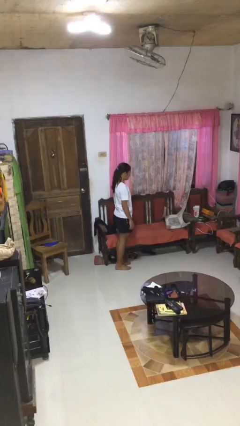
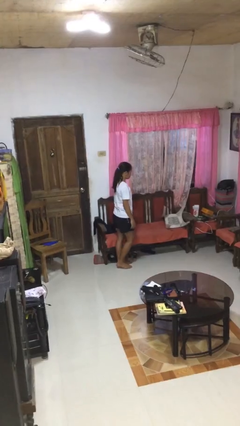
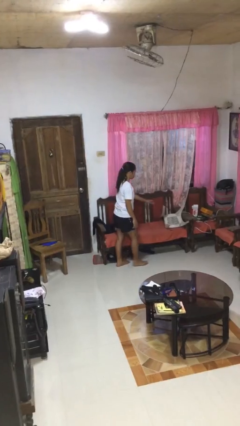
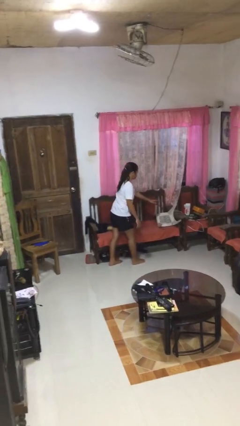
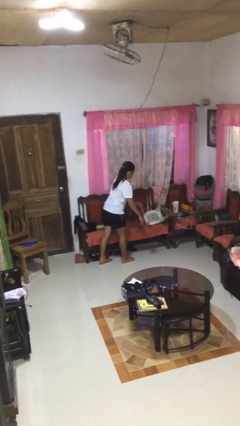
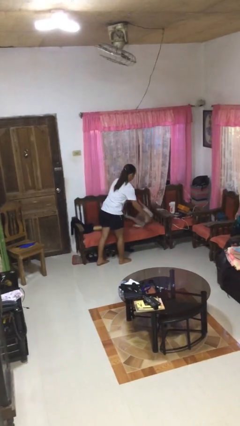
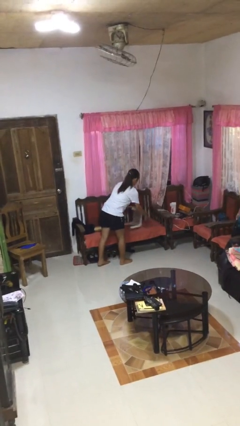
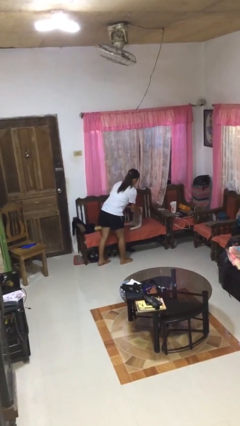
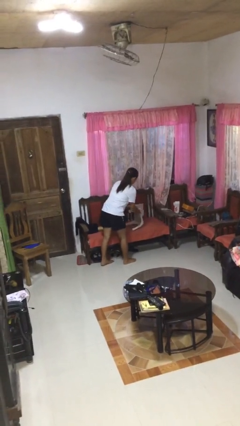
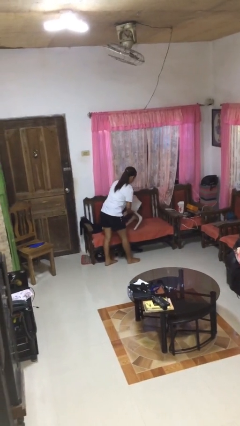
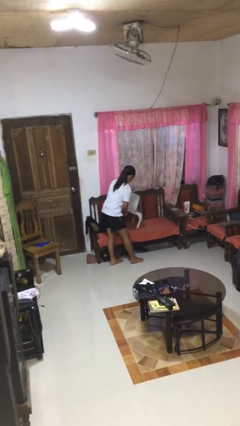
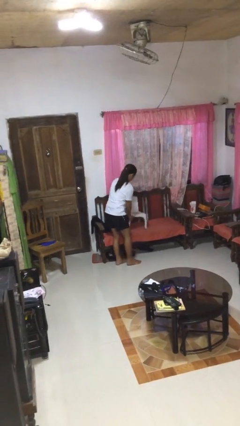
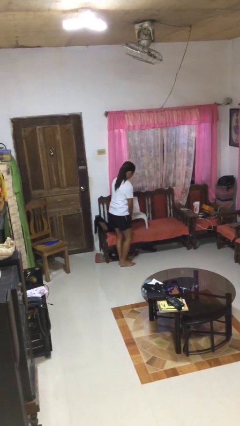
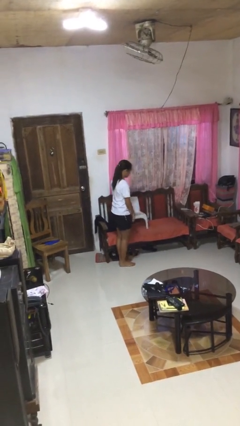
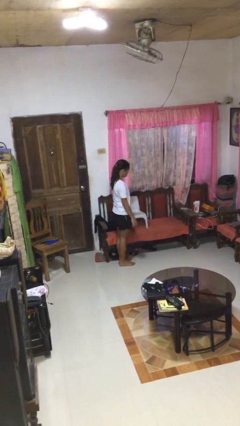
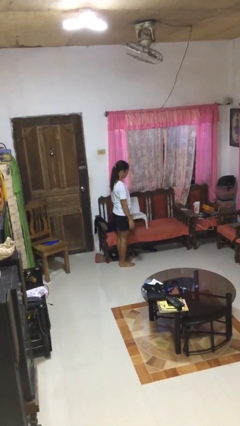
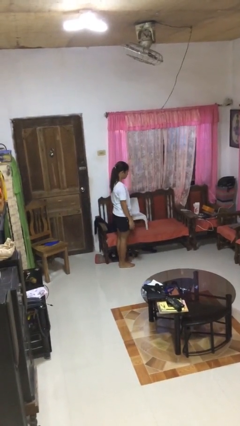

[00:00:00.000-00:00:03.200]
person sets upright furniture

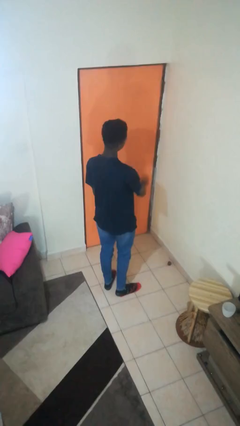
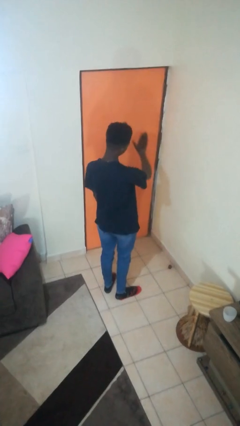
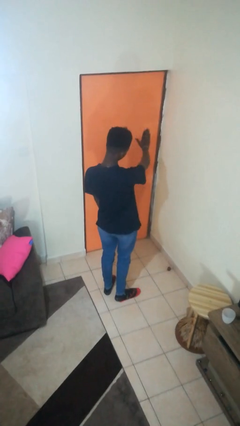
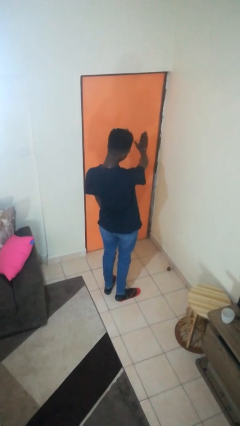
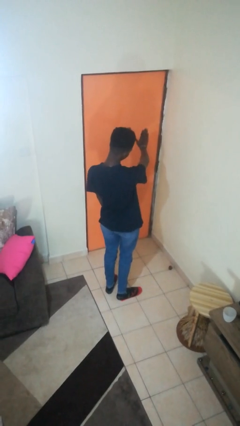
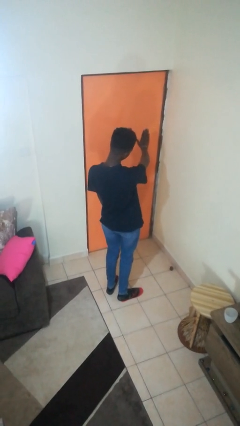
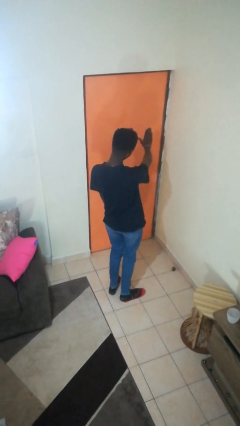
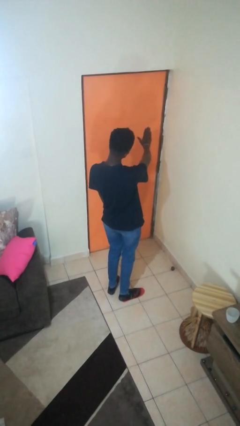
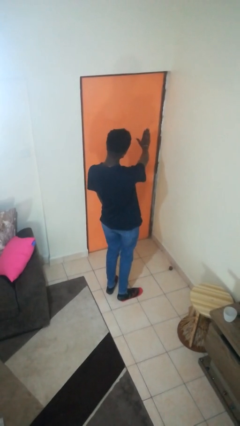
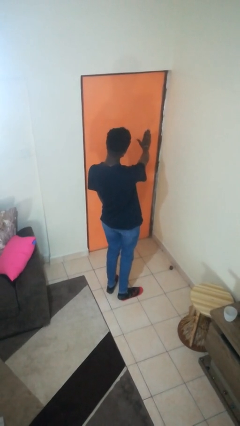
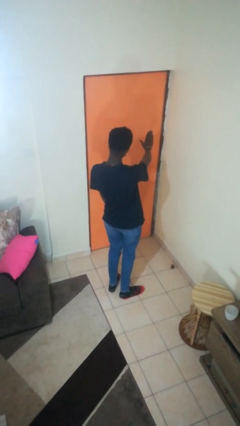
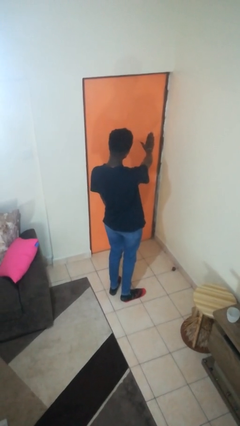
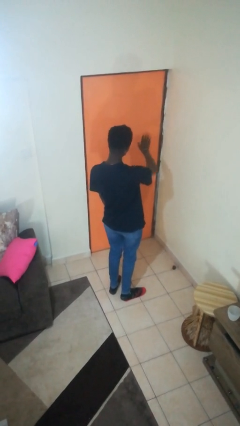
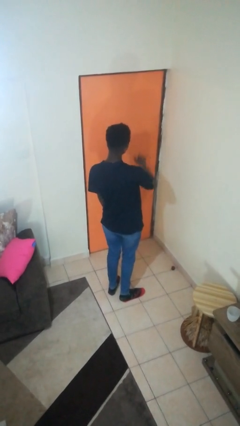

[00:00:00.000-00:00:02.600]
person gestures stop

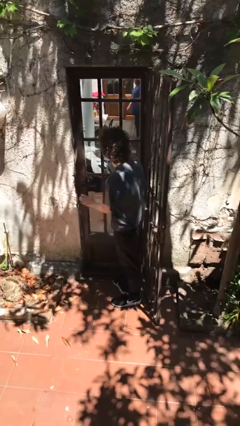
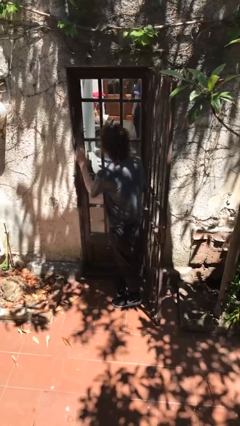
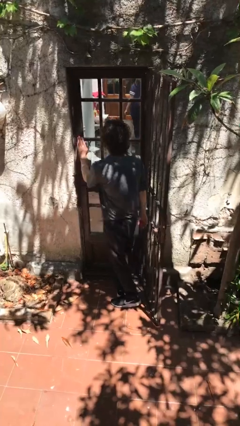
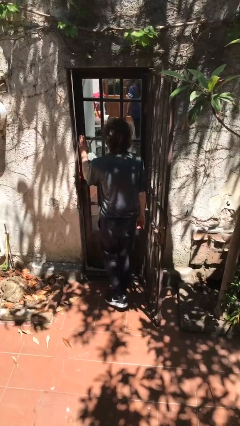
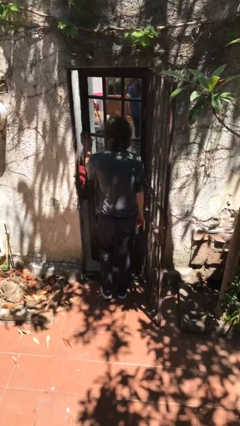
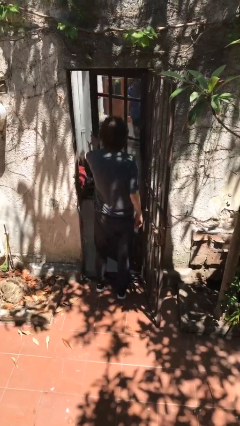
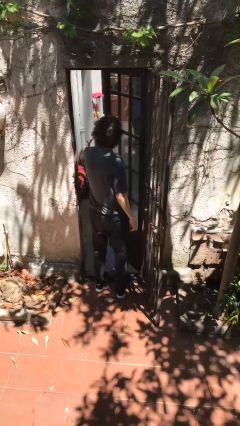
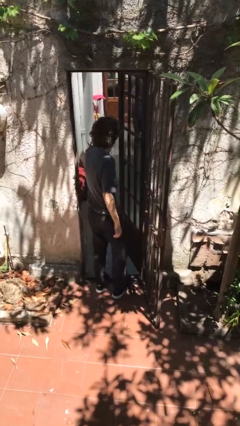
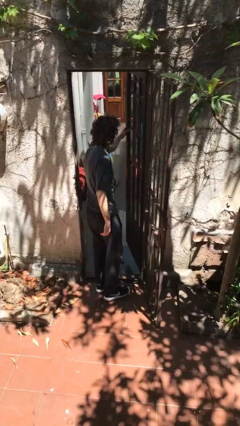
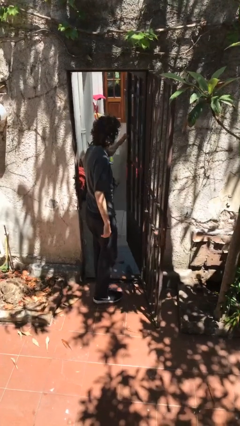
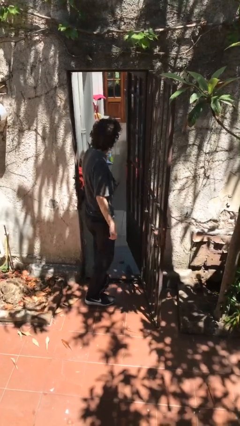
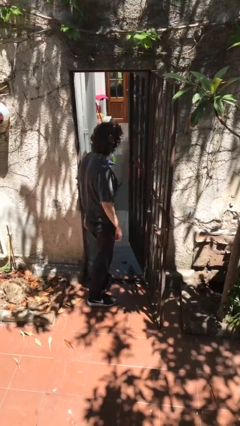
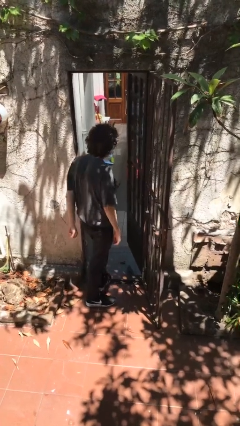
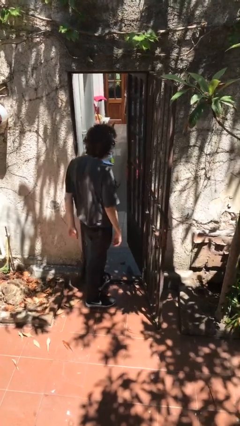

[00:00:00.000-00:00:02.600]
person opens facility door

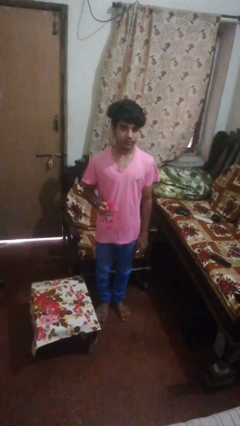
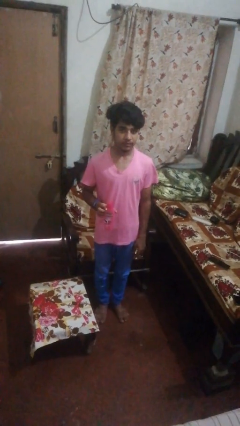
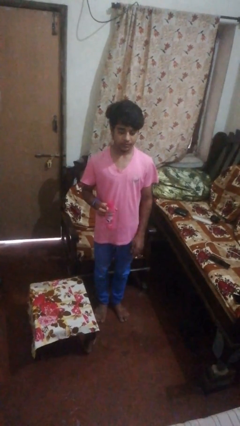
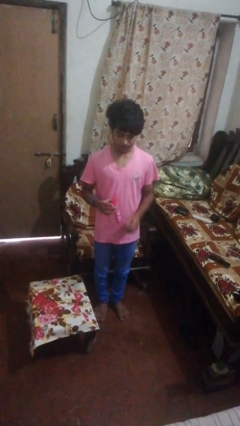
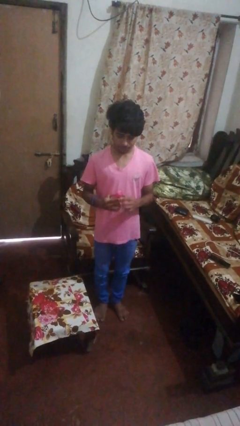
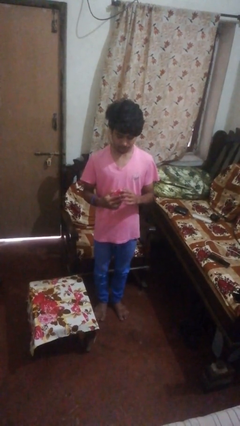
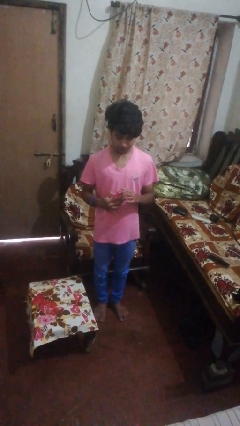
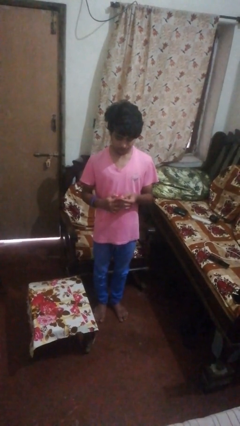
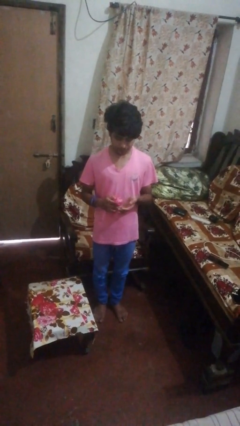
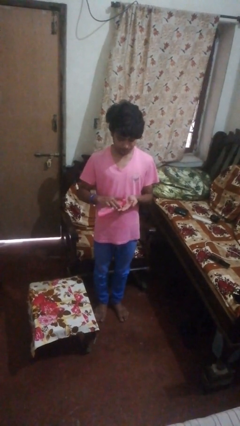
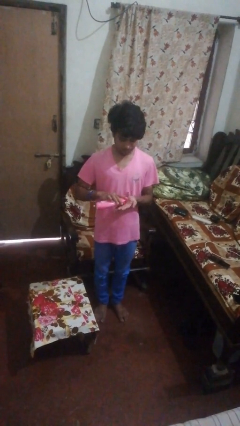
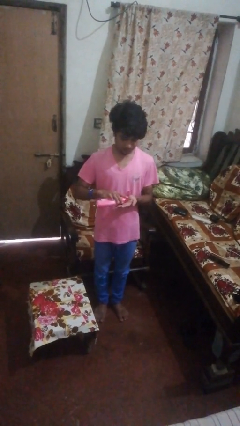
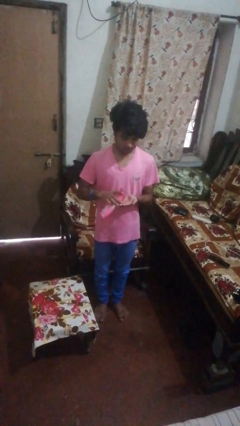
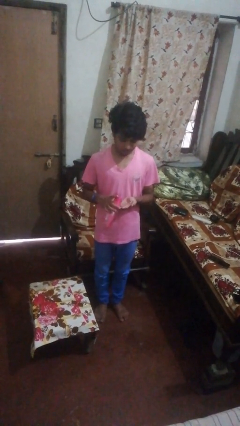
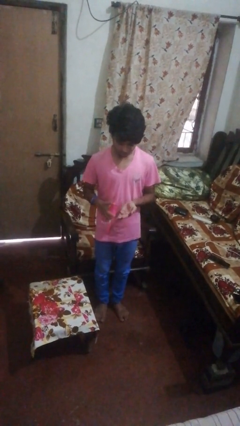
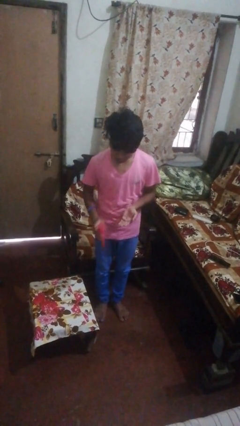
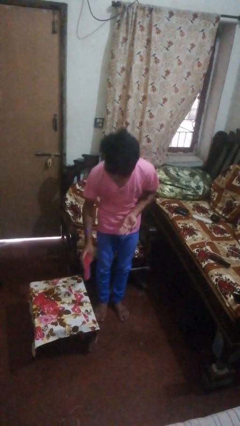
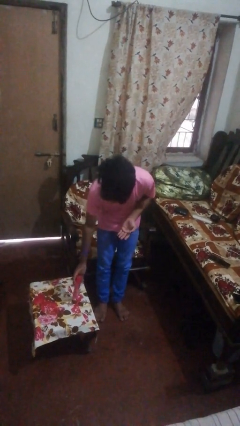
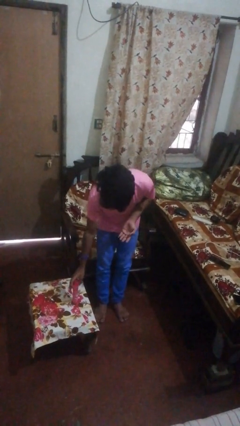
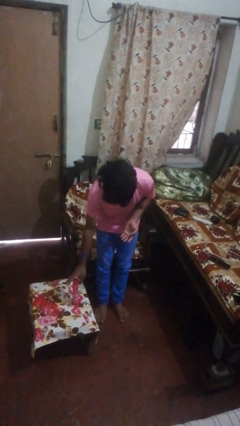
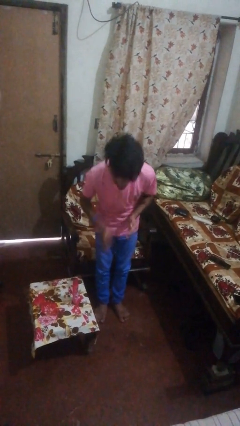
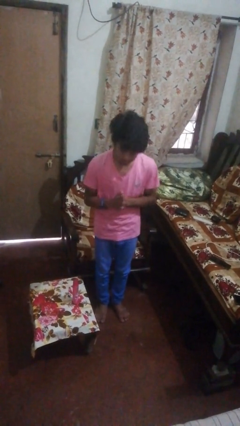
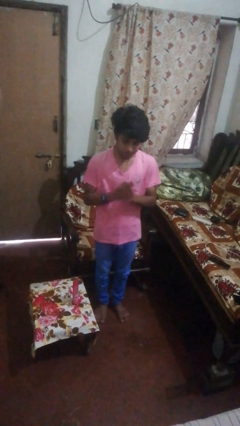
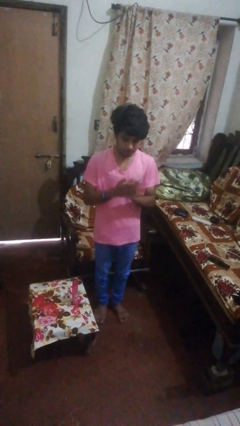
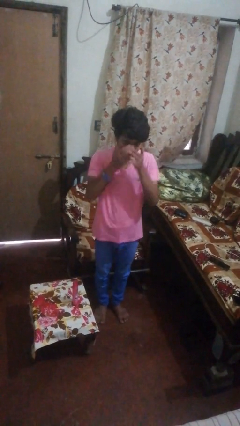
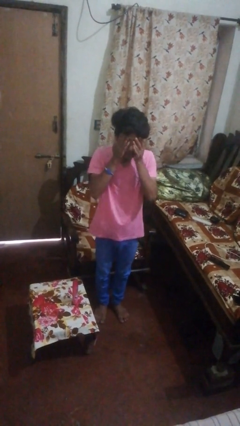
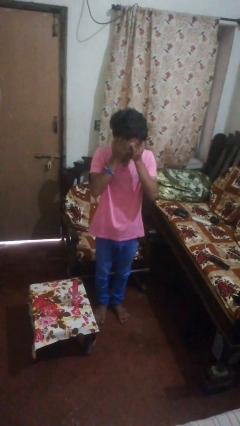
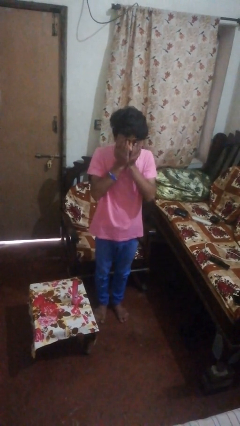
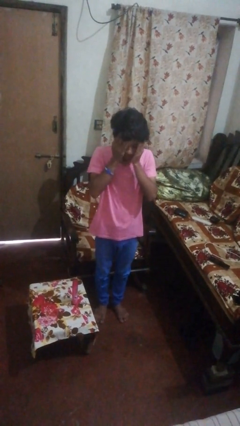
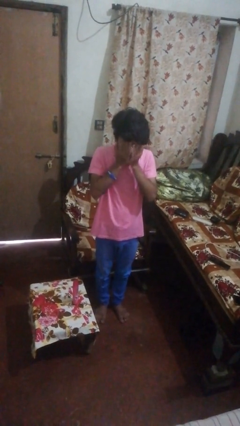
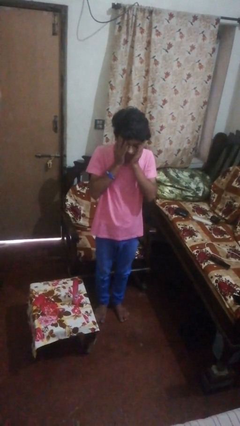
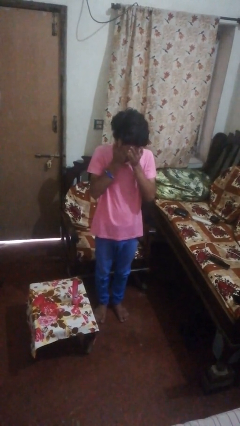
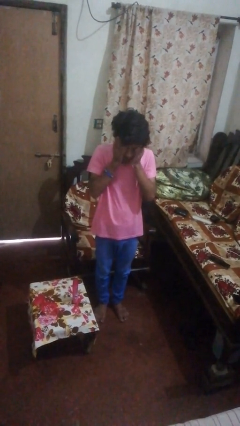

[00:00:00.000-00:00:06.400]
person applies sunscreen

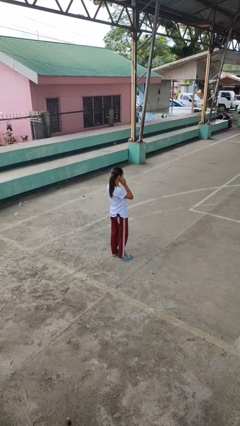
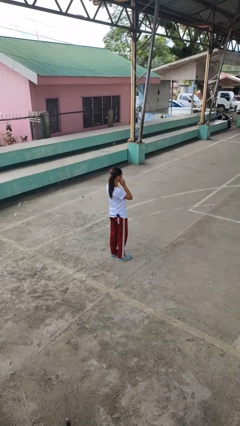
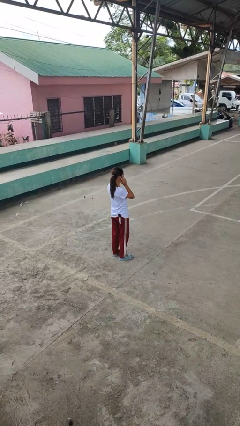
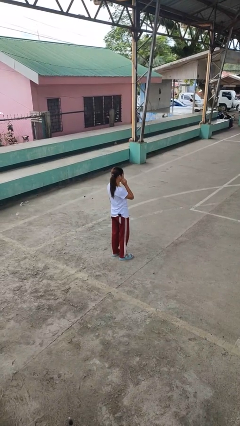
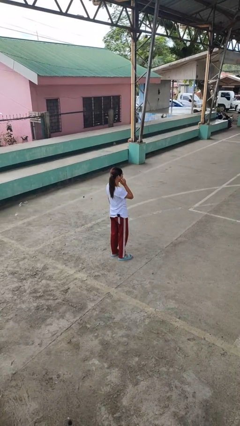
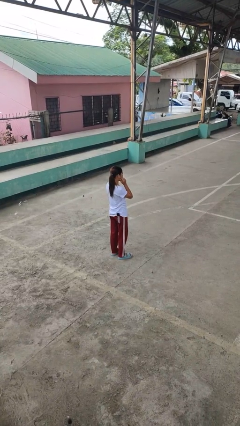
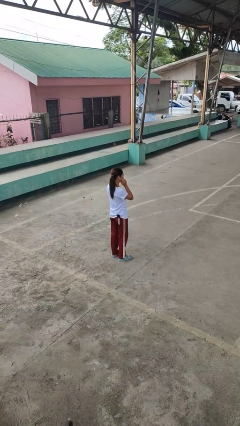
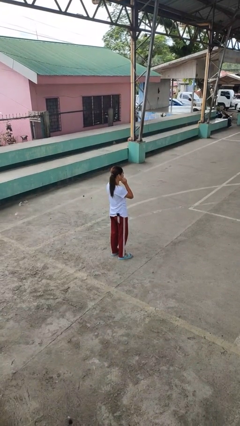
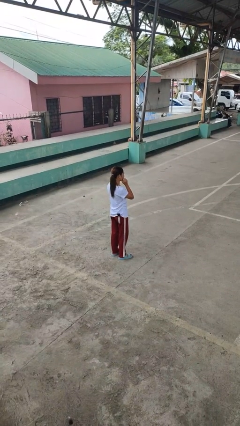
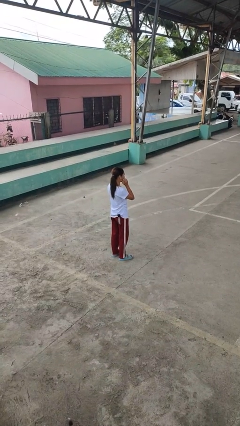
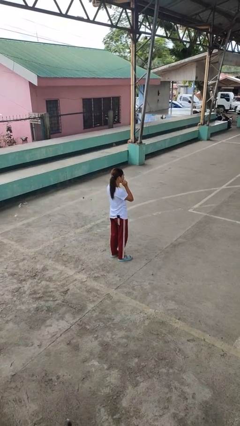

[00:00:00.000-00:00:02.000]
person scratches face

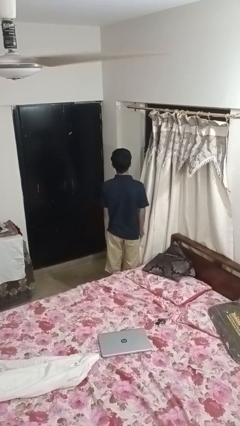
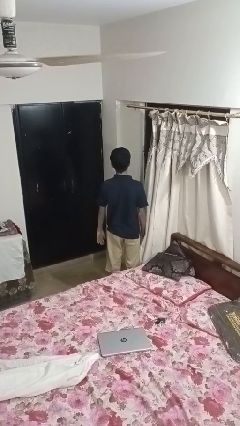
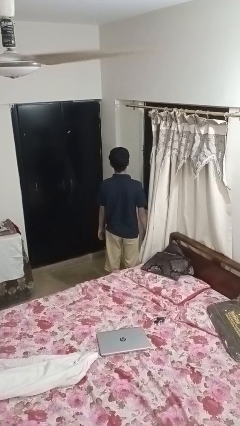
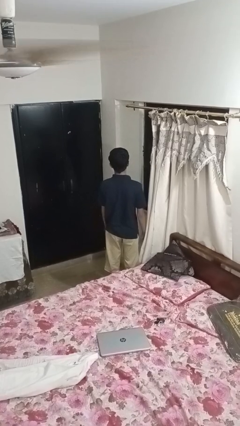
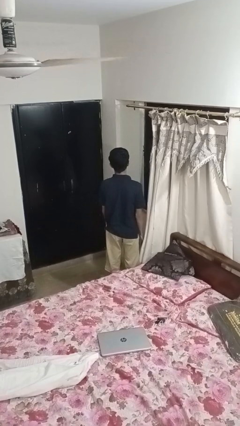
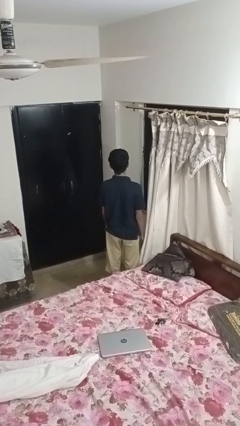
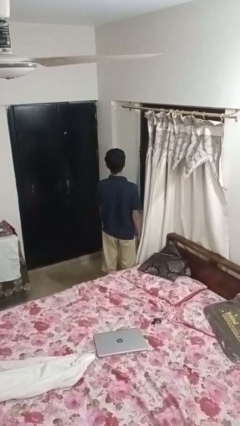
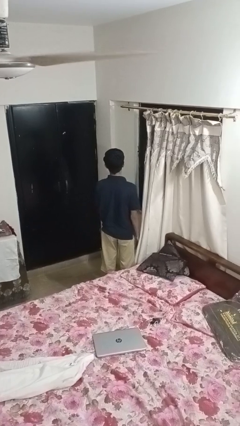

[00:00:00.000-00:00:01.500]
person closes curtains
